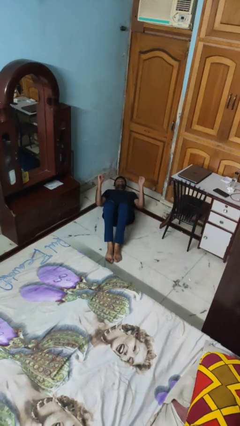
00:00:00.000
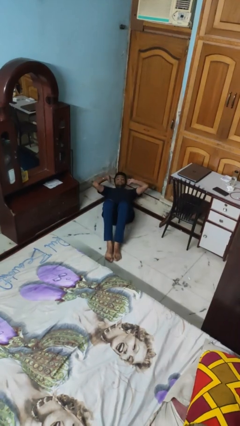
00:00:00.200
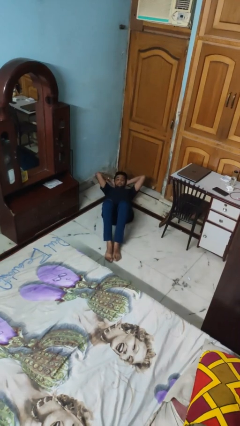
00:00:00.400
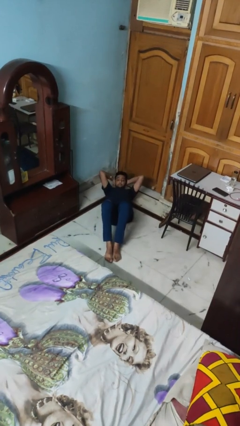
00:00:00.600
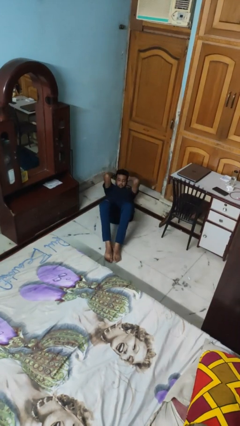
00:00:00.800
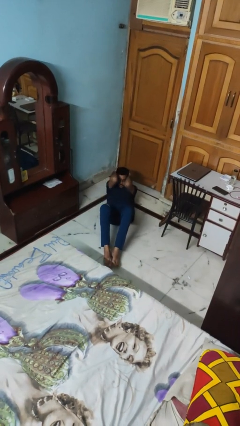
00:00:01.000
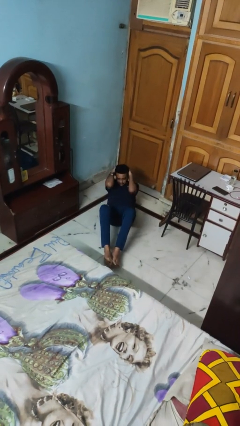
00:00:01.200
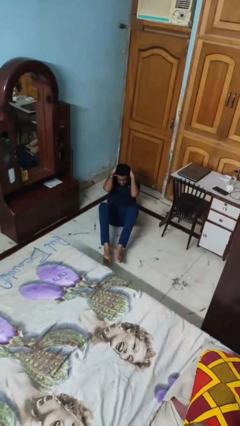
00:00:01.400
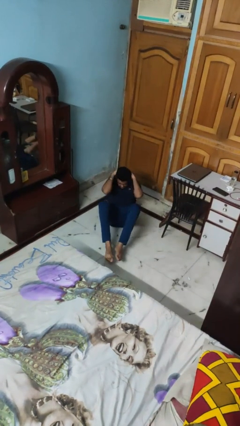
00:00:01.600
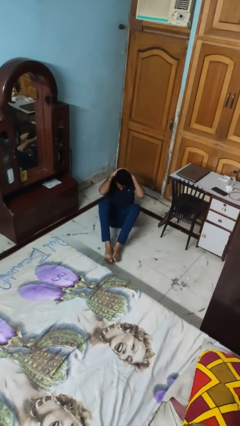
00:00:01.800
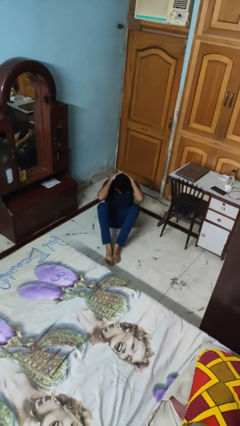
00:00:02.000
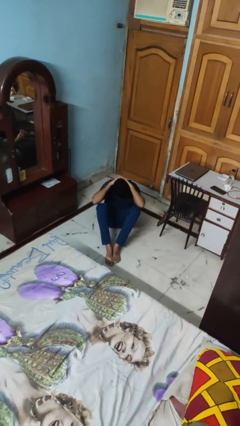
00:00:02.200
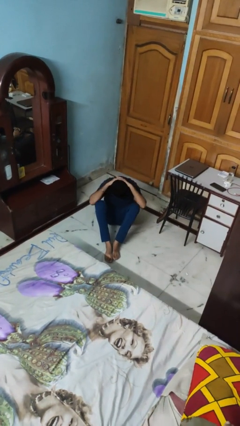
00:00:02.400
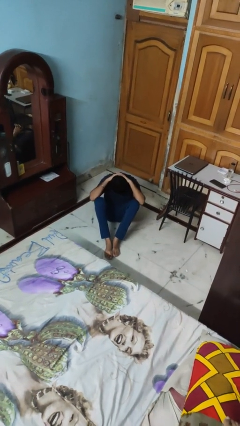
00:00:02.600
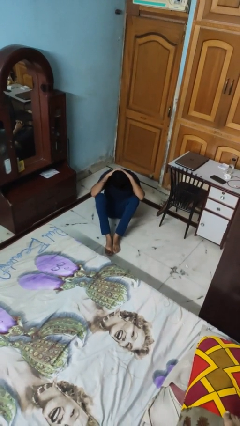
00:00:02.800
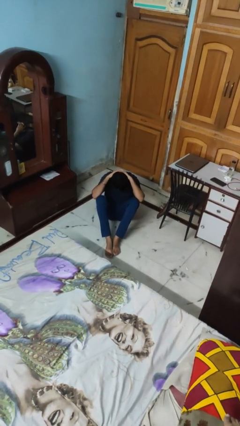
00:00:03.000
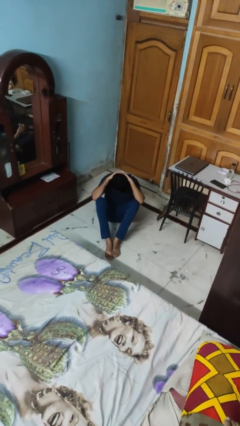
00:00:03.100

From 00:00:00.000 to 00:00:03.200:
person exercises with situp

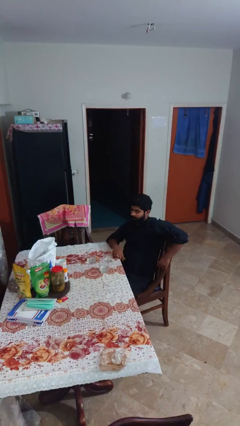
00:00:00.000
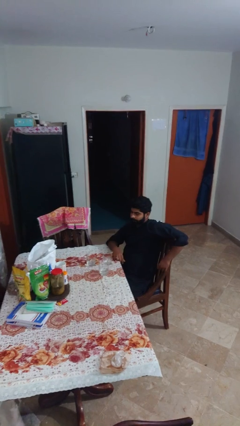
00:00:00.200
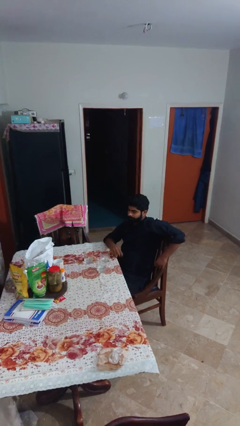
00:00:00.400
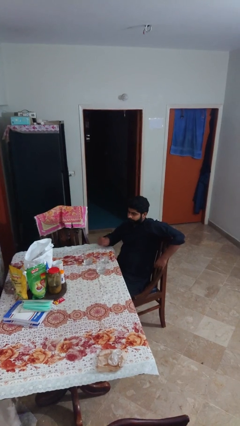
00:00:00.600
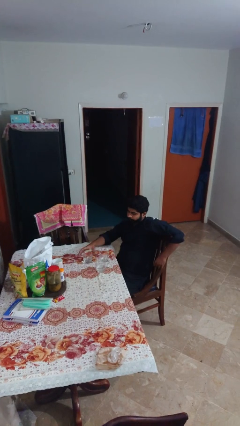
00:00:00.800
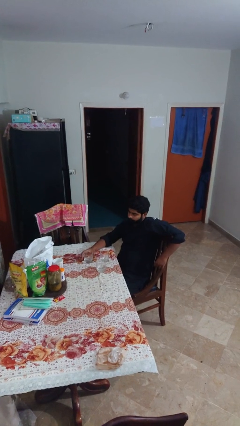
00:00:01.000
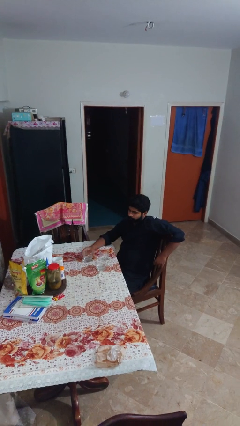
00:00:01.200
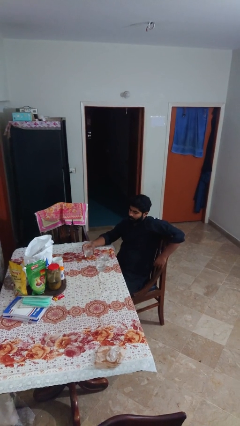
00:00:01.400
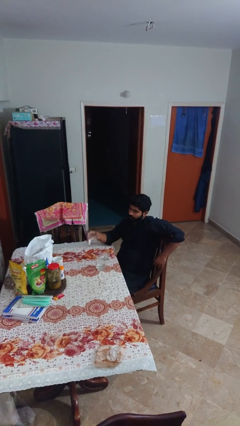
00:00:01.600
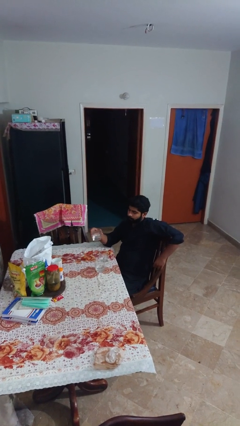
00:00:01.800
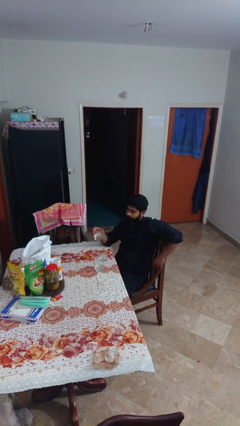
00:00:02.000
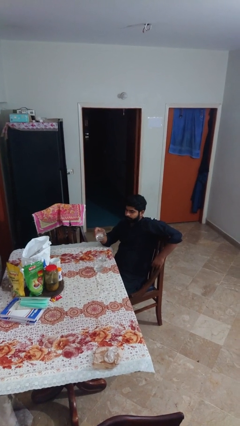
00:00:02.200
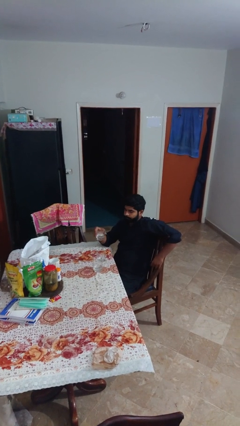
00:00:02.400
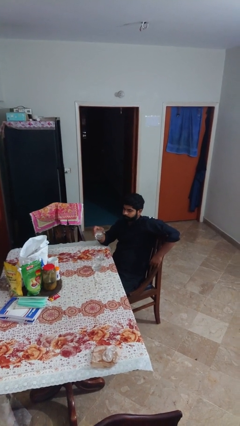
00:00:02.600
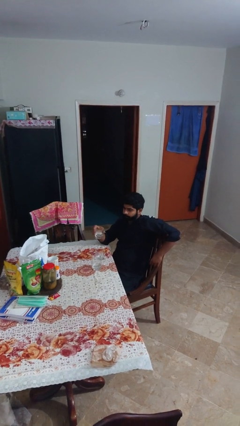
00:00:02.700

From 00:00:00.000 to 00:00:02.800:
person picks up object from table

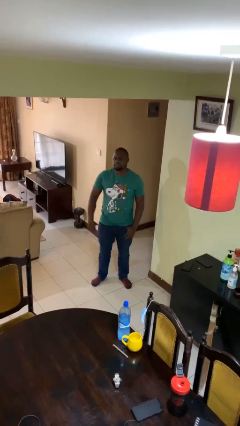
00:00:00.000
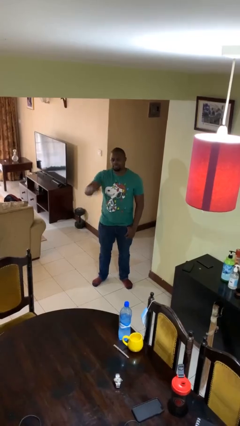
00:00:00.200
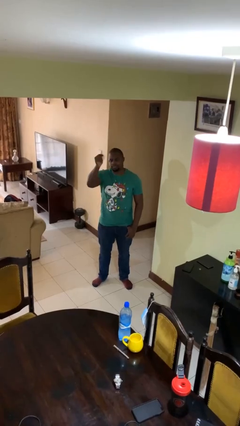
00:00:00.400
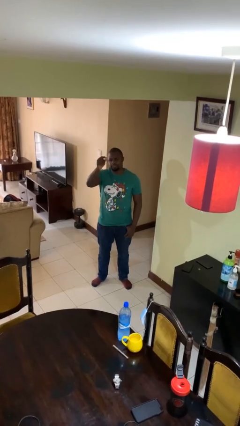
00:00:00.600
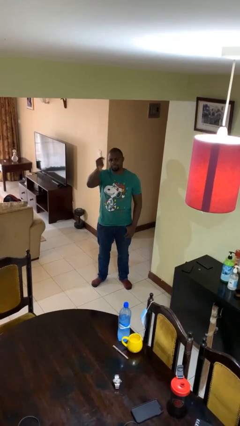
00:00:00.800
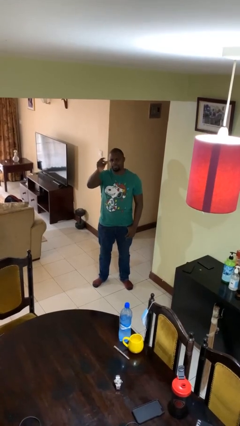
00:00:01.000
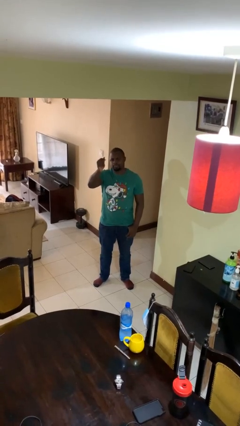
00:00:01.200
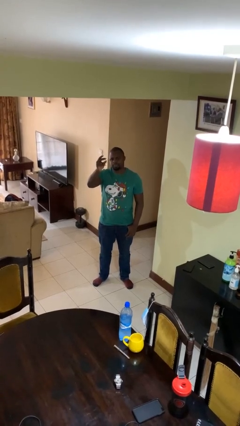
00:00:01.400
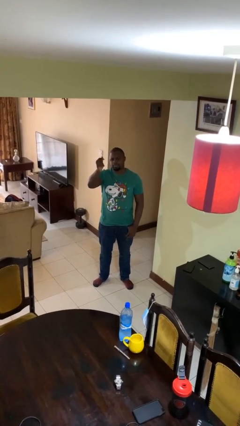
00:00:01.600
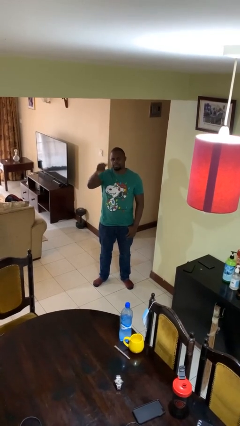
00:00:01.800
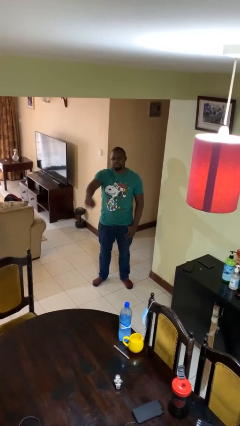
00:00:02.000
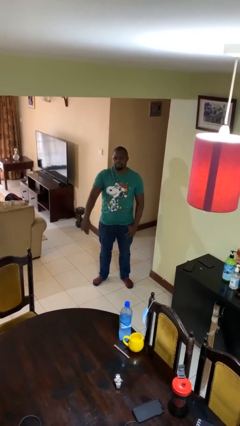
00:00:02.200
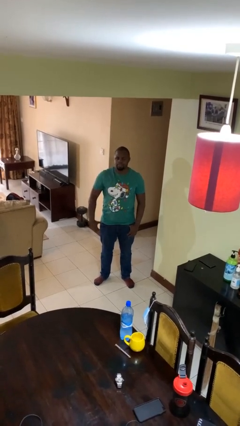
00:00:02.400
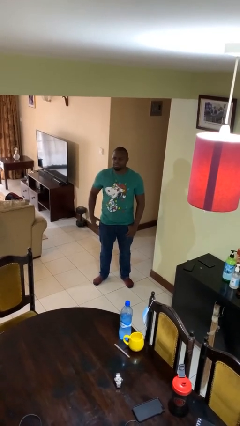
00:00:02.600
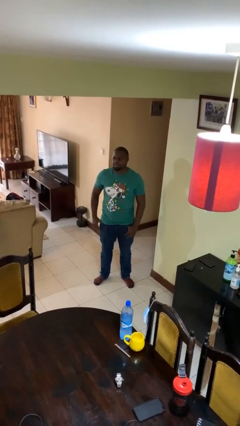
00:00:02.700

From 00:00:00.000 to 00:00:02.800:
person snaps fingers

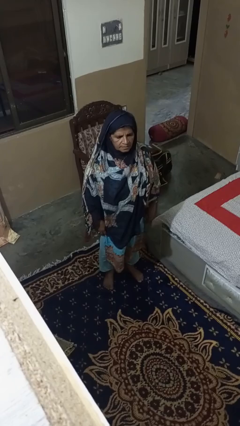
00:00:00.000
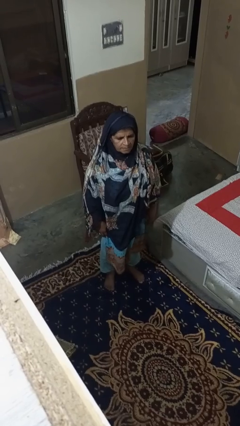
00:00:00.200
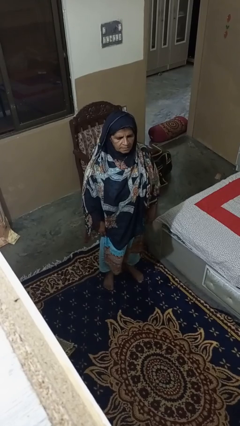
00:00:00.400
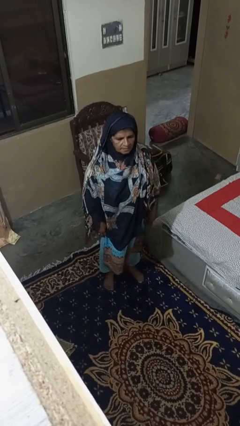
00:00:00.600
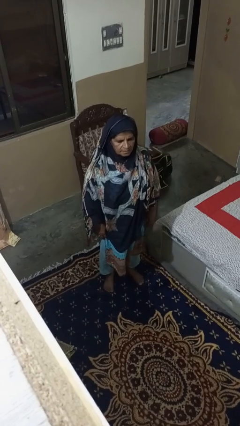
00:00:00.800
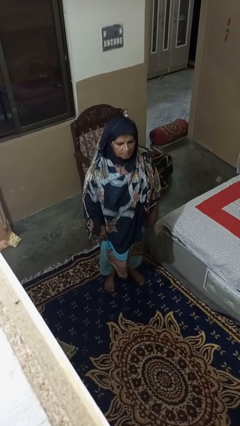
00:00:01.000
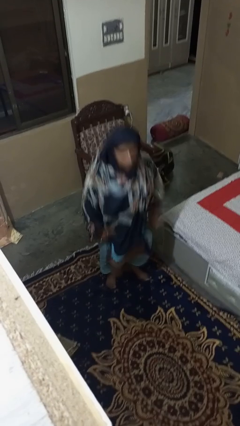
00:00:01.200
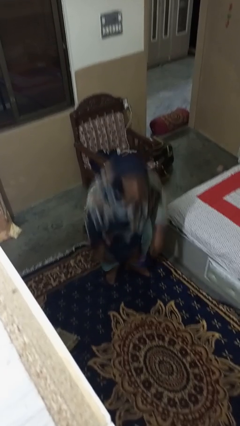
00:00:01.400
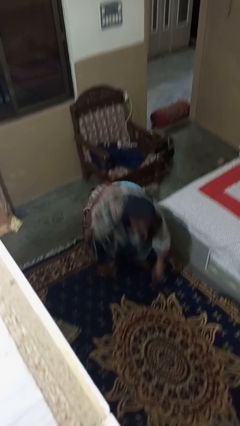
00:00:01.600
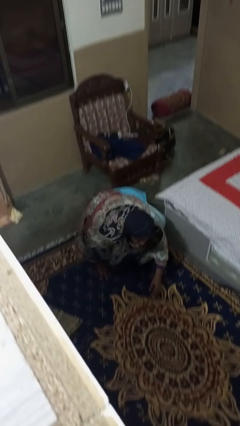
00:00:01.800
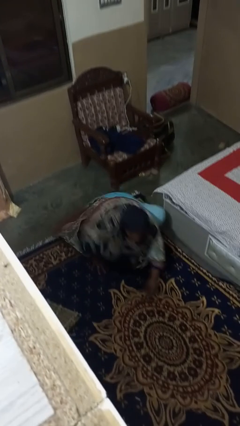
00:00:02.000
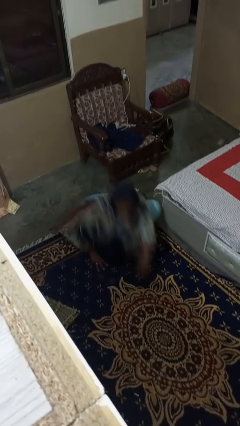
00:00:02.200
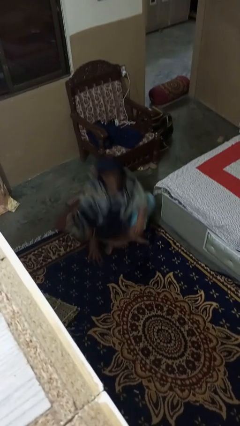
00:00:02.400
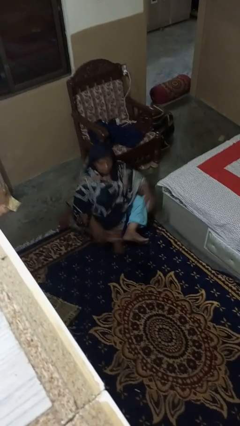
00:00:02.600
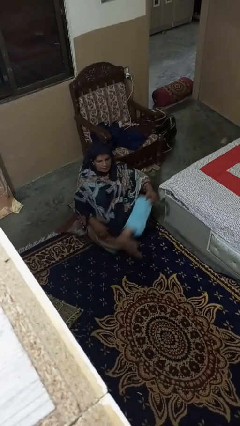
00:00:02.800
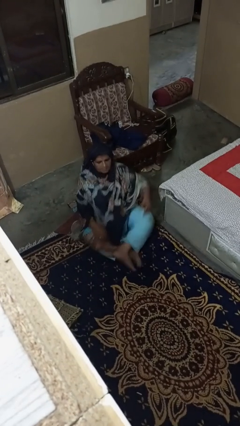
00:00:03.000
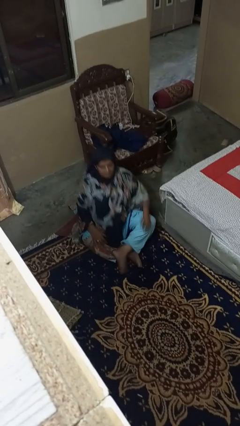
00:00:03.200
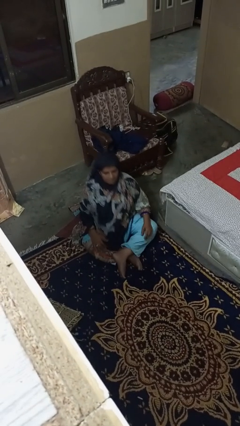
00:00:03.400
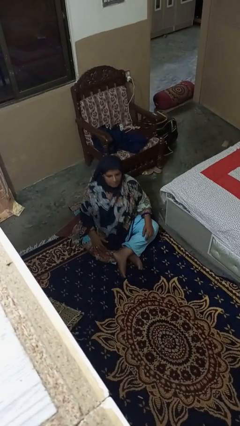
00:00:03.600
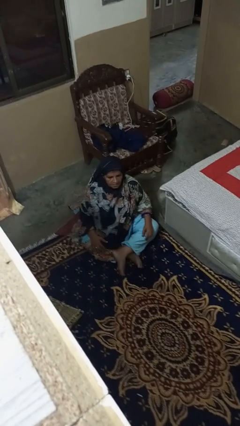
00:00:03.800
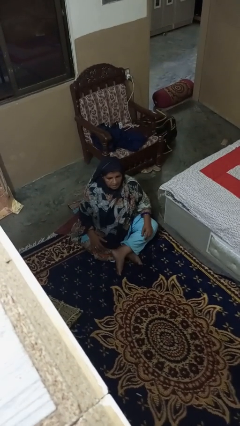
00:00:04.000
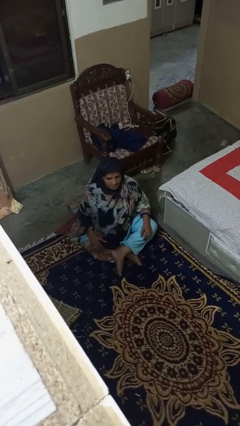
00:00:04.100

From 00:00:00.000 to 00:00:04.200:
person sits crisscross

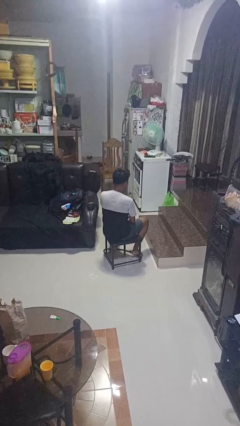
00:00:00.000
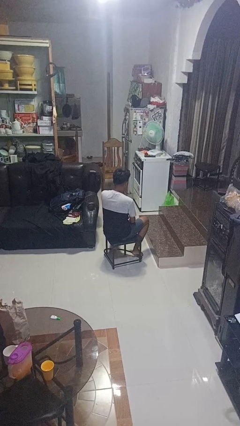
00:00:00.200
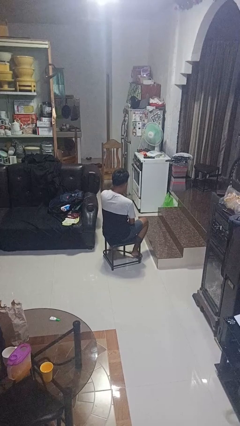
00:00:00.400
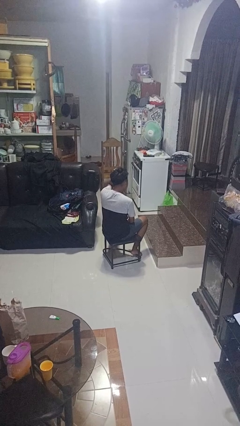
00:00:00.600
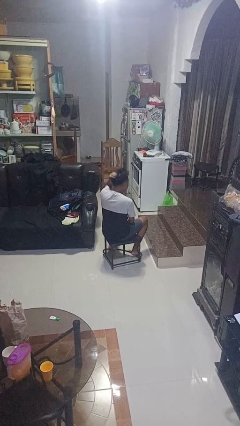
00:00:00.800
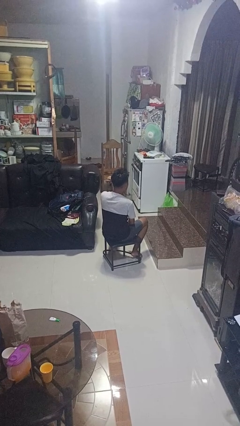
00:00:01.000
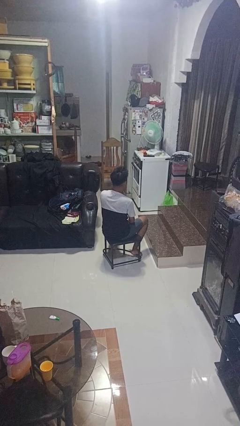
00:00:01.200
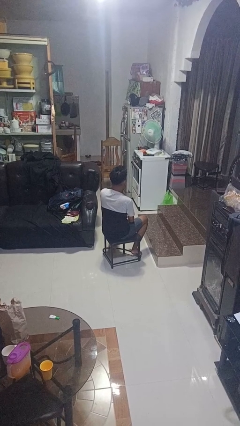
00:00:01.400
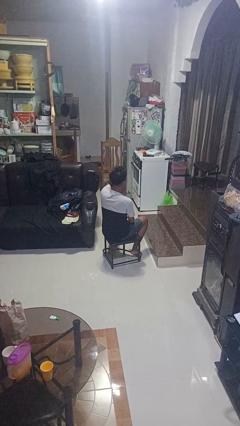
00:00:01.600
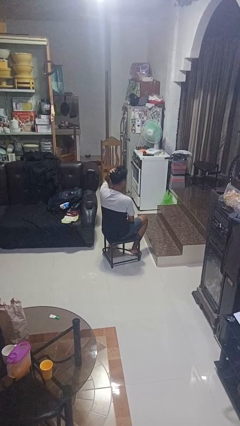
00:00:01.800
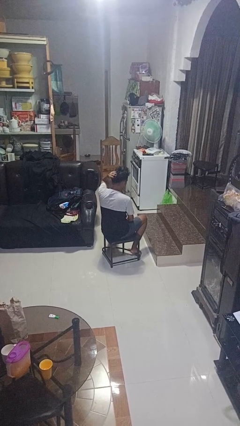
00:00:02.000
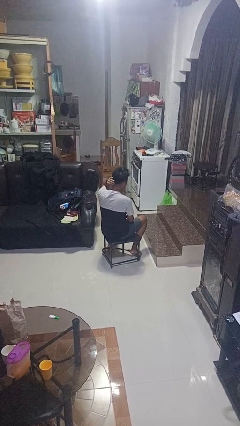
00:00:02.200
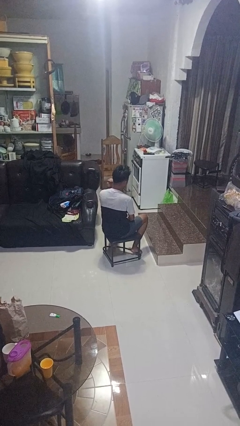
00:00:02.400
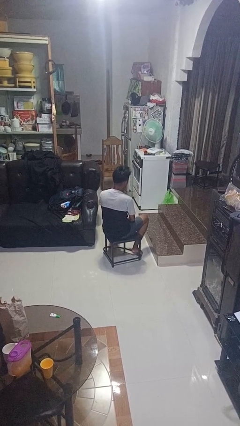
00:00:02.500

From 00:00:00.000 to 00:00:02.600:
person strokes hair

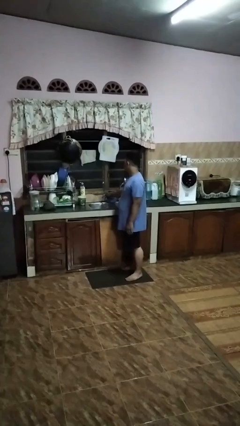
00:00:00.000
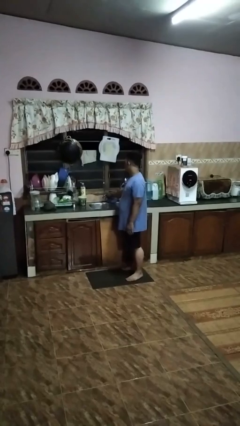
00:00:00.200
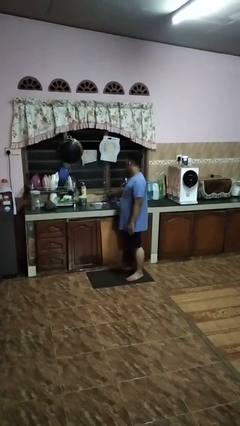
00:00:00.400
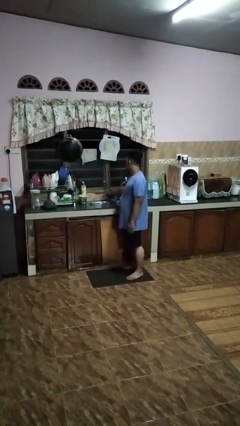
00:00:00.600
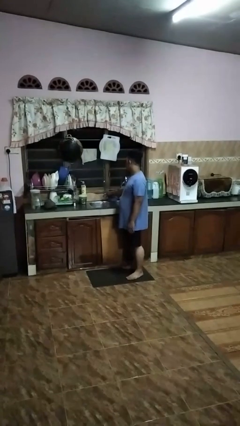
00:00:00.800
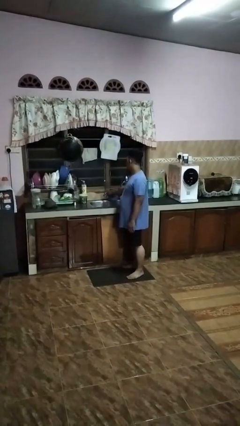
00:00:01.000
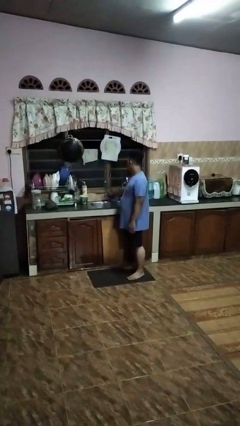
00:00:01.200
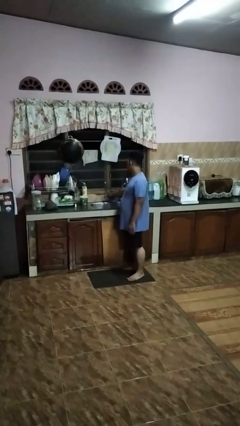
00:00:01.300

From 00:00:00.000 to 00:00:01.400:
person turns off faucet

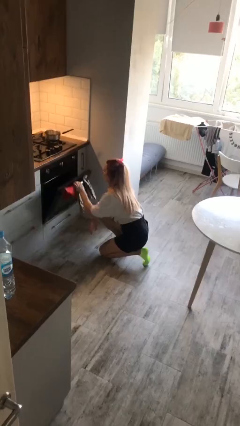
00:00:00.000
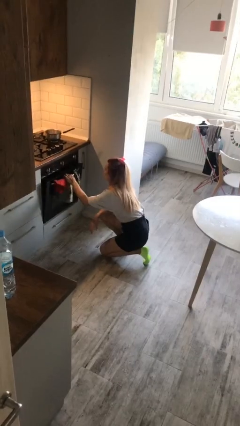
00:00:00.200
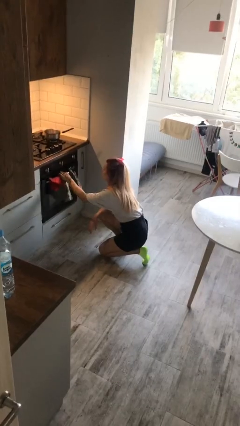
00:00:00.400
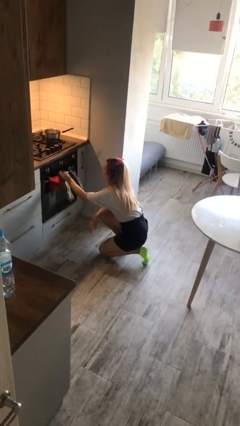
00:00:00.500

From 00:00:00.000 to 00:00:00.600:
person closes oven door
